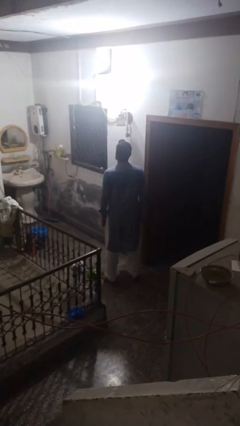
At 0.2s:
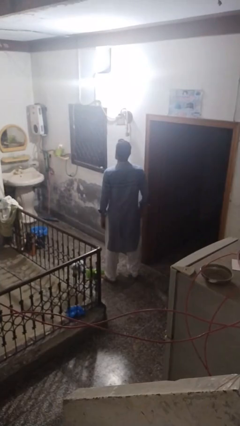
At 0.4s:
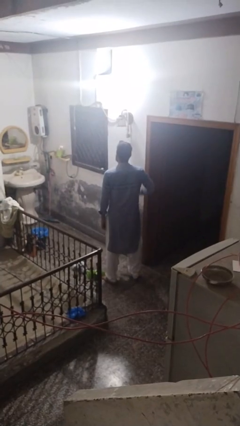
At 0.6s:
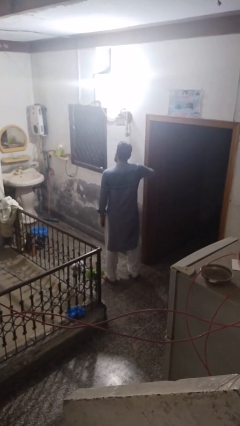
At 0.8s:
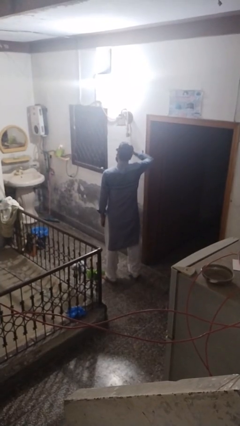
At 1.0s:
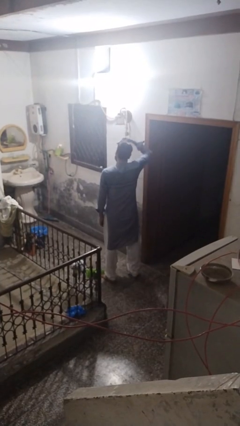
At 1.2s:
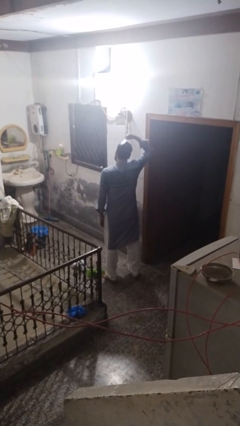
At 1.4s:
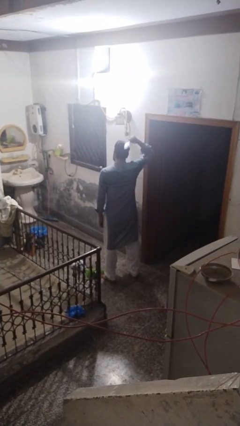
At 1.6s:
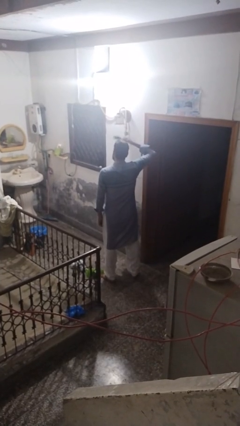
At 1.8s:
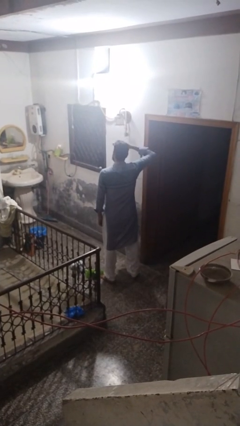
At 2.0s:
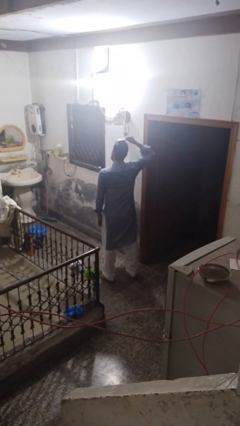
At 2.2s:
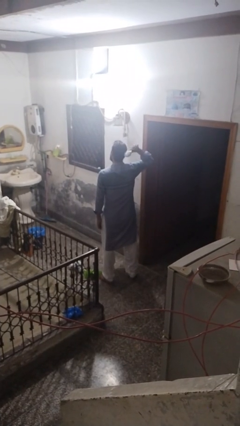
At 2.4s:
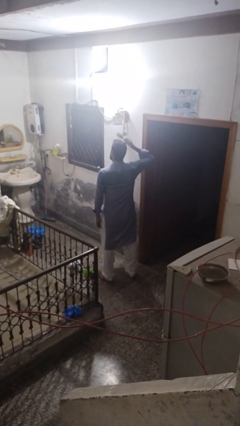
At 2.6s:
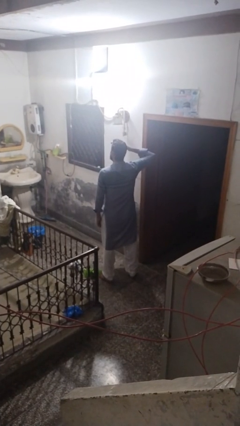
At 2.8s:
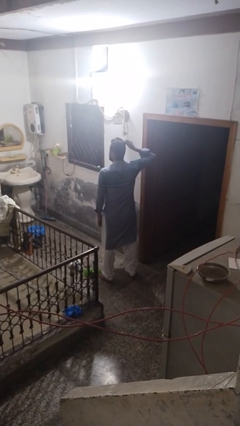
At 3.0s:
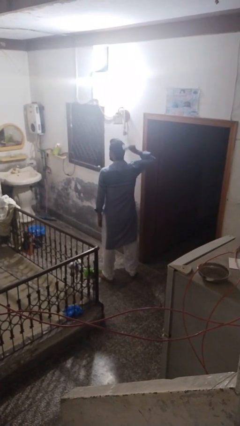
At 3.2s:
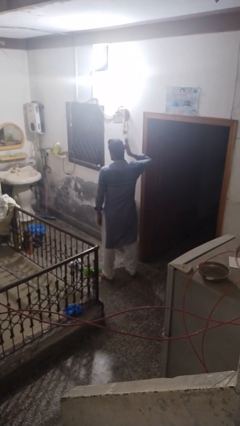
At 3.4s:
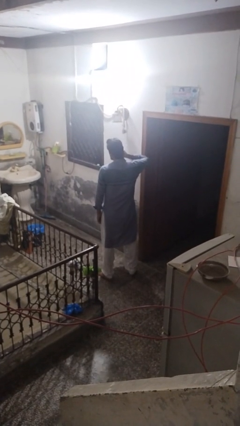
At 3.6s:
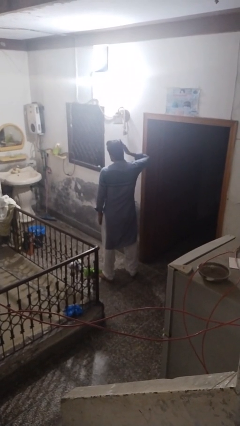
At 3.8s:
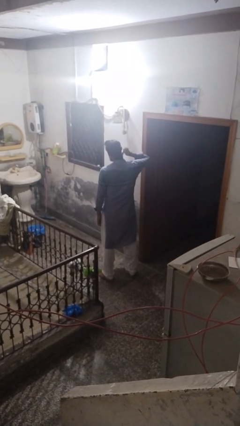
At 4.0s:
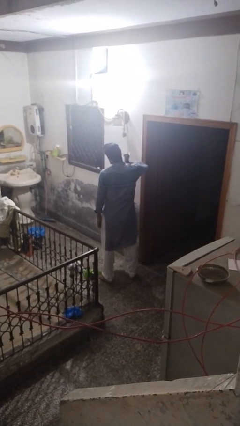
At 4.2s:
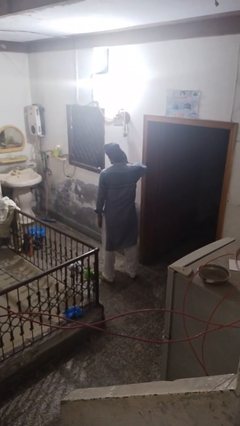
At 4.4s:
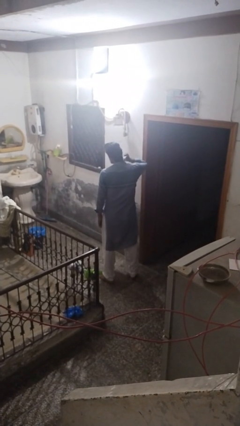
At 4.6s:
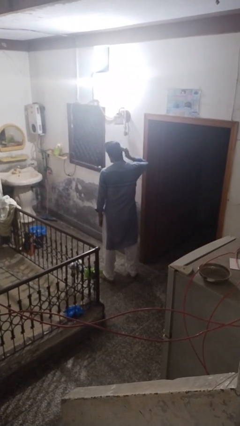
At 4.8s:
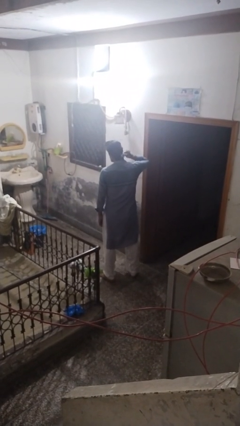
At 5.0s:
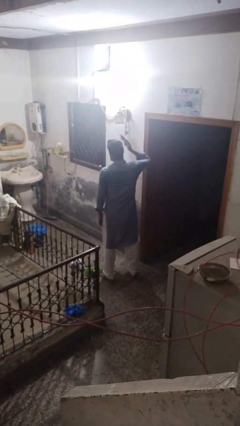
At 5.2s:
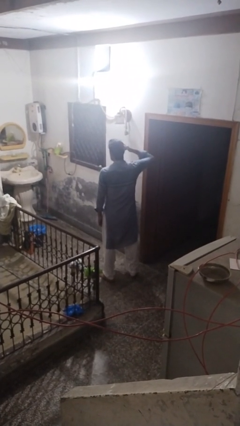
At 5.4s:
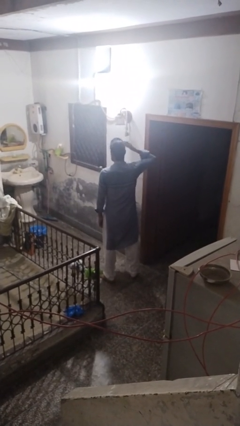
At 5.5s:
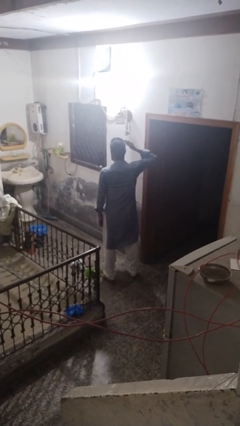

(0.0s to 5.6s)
person brushes hair

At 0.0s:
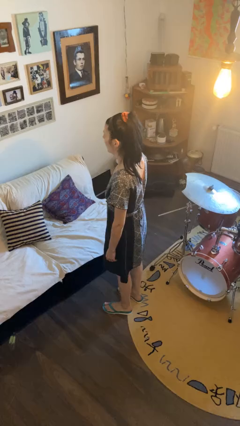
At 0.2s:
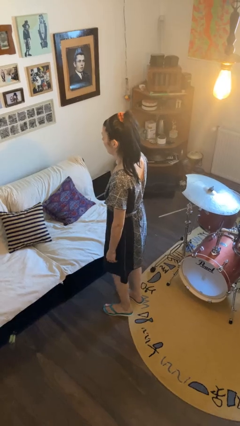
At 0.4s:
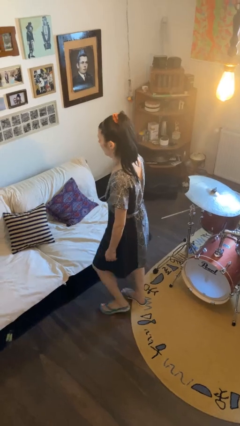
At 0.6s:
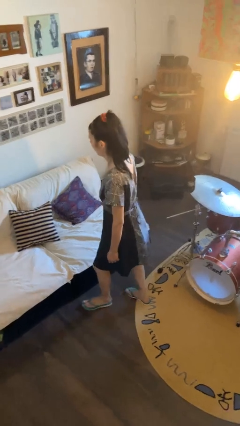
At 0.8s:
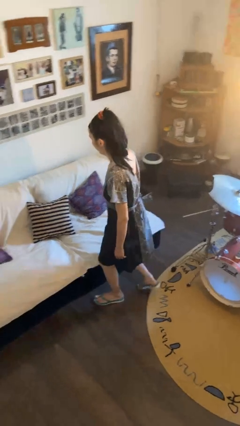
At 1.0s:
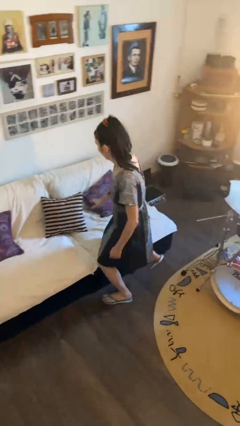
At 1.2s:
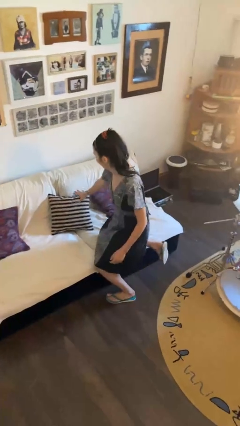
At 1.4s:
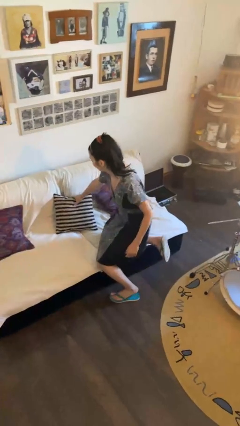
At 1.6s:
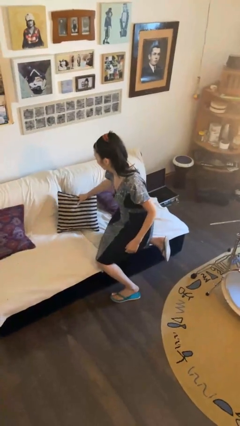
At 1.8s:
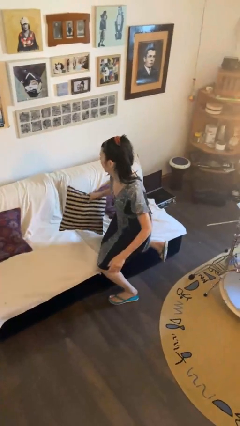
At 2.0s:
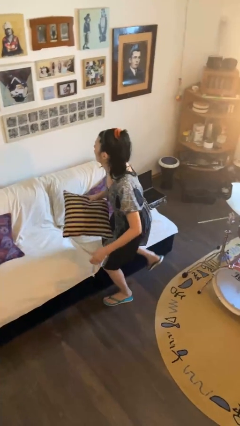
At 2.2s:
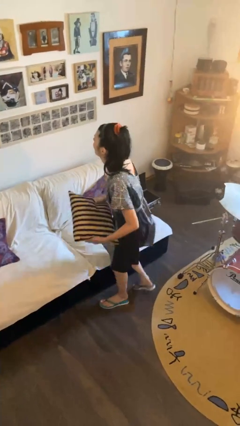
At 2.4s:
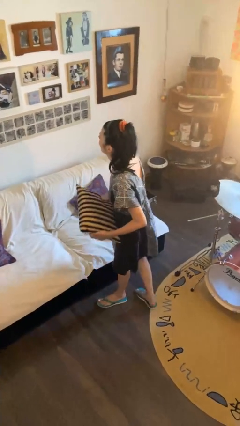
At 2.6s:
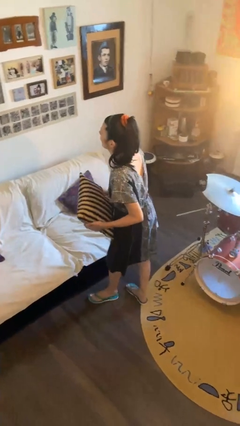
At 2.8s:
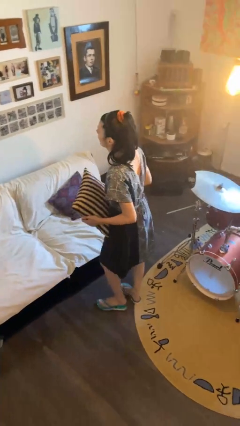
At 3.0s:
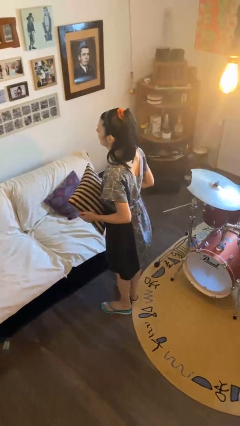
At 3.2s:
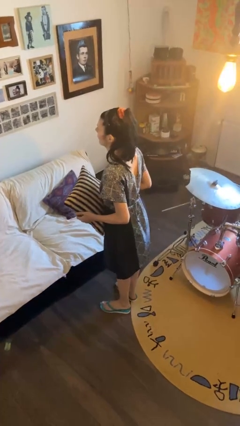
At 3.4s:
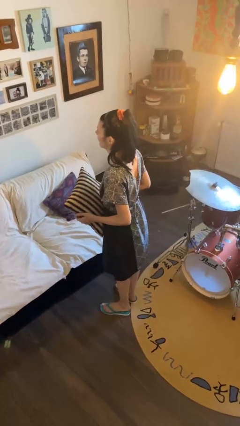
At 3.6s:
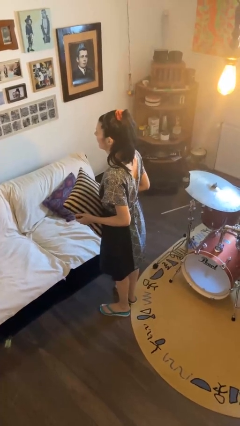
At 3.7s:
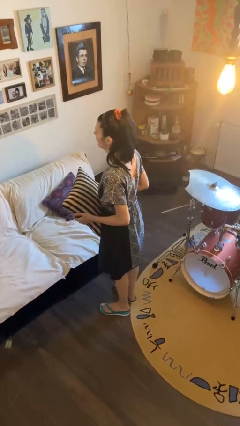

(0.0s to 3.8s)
person picks up object from couch

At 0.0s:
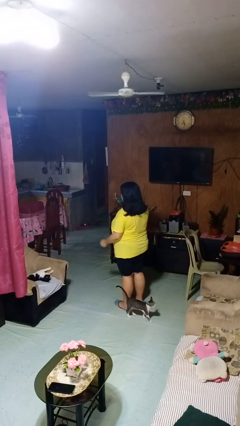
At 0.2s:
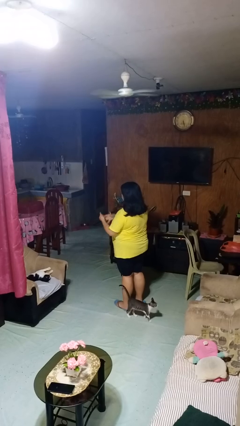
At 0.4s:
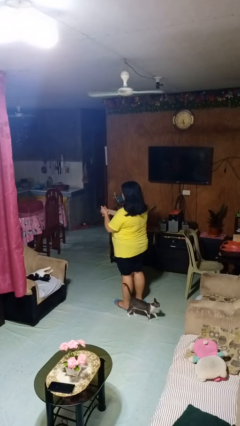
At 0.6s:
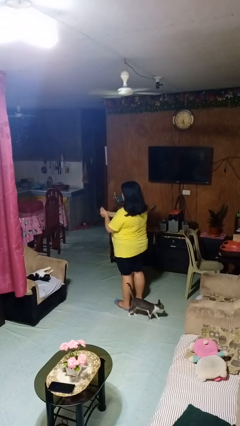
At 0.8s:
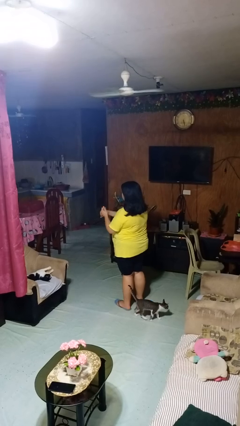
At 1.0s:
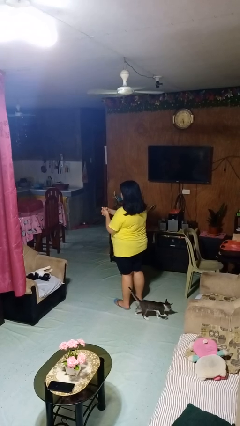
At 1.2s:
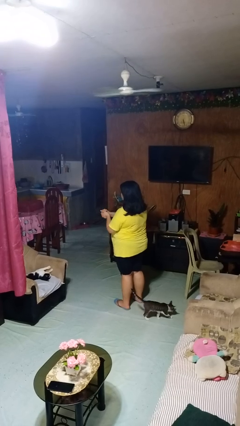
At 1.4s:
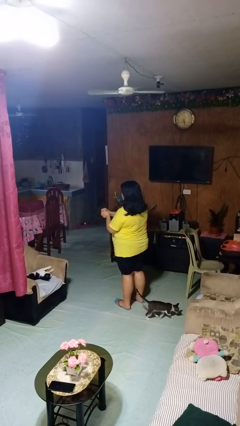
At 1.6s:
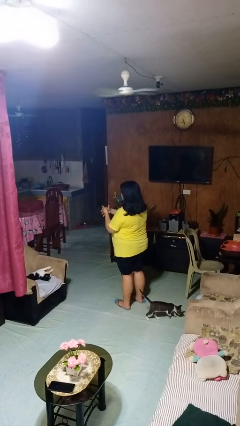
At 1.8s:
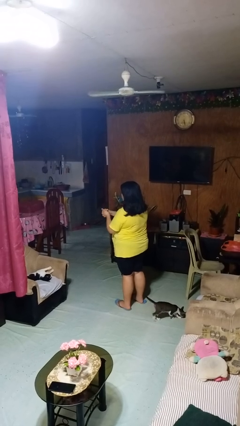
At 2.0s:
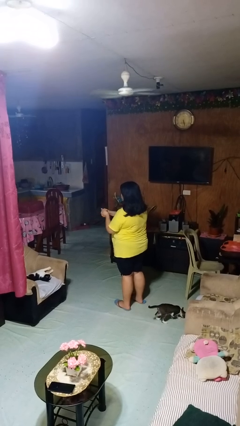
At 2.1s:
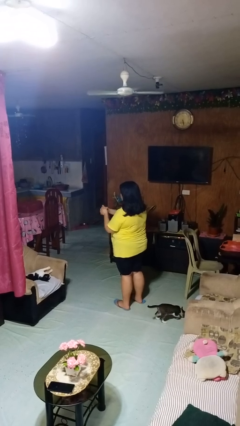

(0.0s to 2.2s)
person cracks knuckles

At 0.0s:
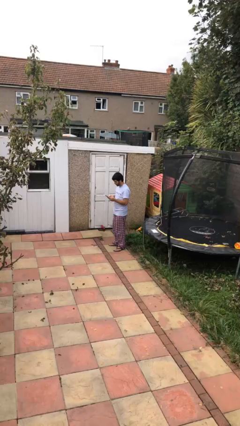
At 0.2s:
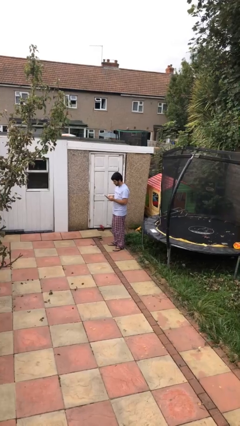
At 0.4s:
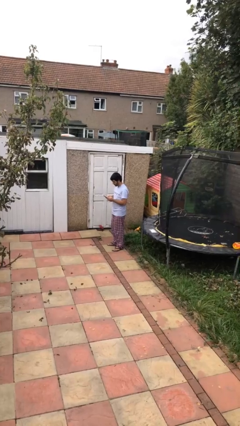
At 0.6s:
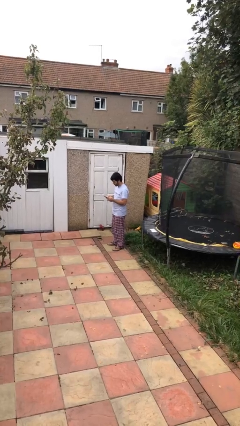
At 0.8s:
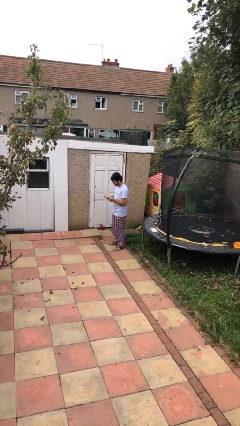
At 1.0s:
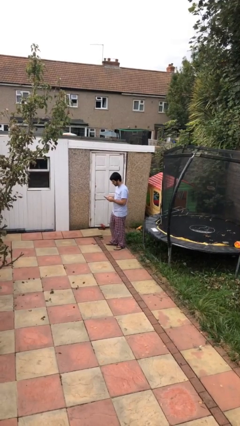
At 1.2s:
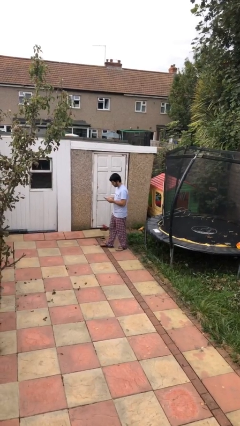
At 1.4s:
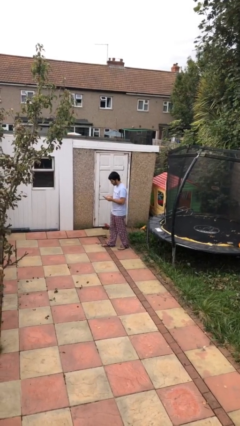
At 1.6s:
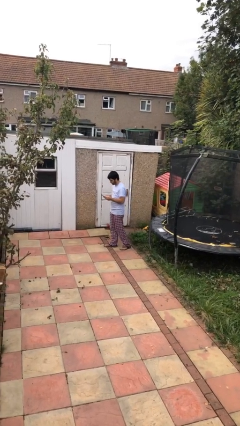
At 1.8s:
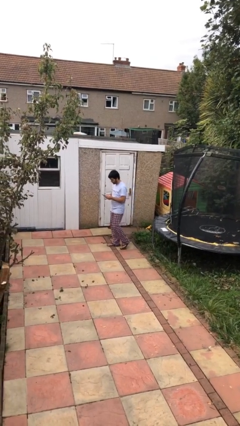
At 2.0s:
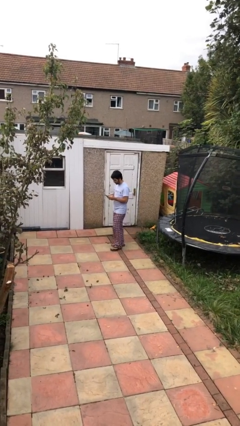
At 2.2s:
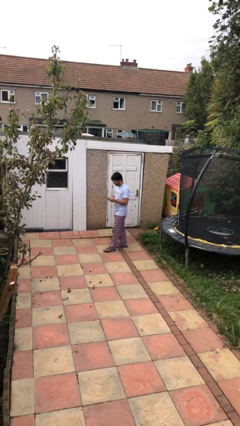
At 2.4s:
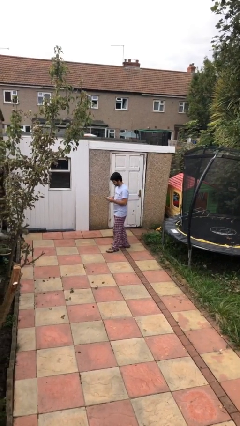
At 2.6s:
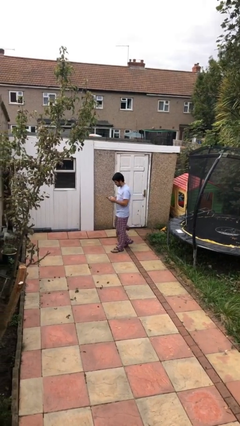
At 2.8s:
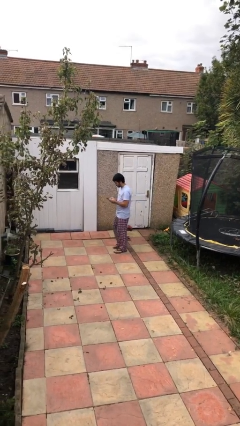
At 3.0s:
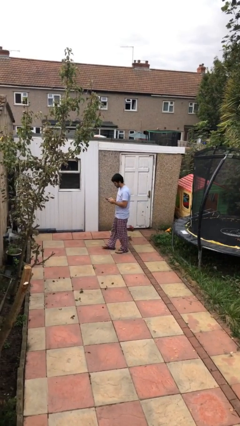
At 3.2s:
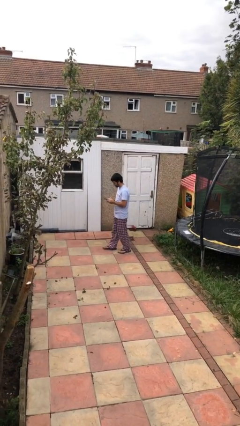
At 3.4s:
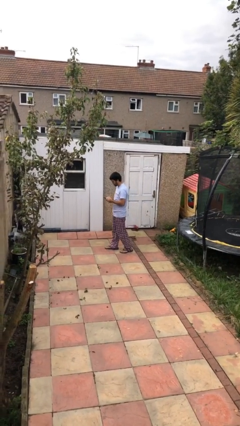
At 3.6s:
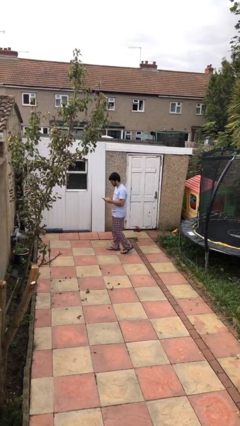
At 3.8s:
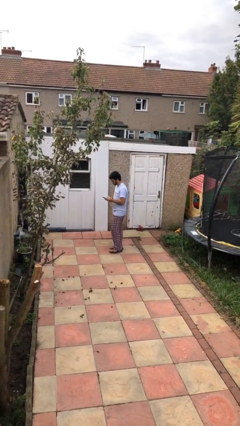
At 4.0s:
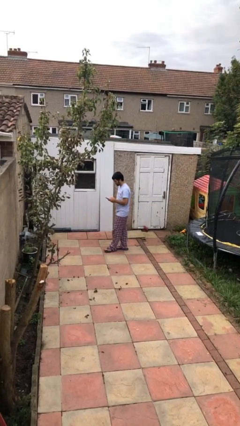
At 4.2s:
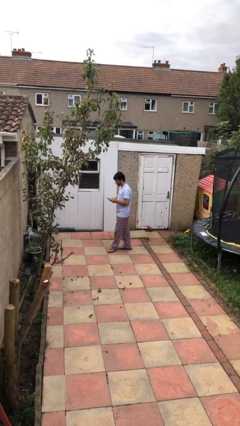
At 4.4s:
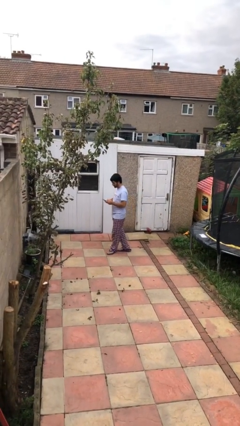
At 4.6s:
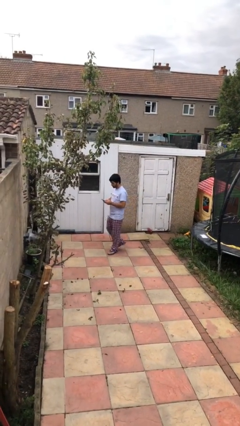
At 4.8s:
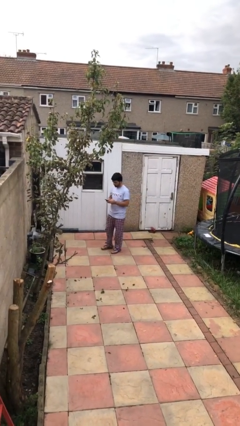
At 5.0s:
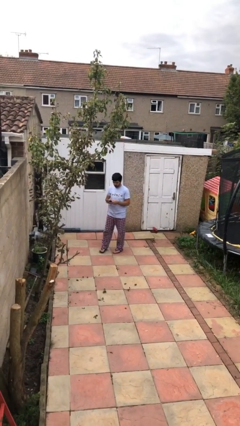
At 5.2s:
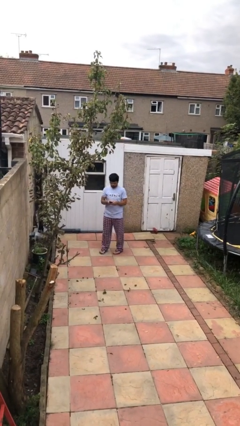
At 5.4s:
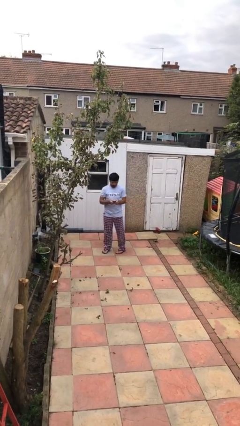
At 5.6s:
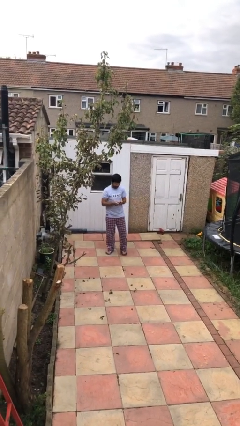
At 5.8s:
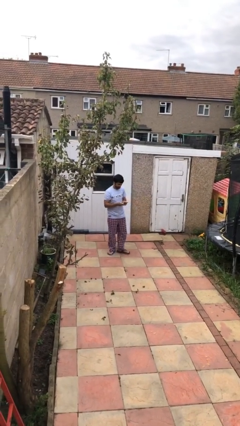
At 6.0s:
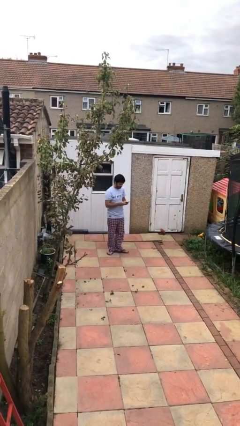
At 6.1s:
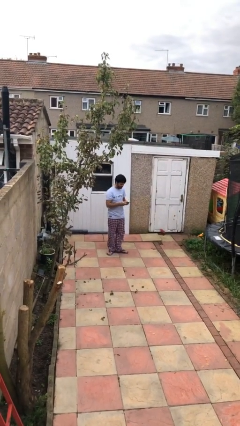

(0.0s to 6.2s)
person texts on phone
